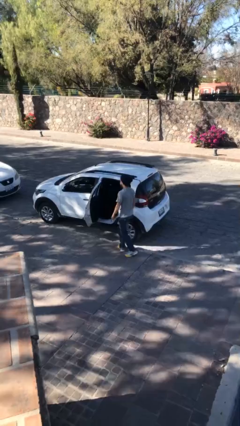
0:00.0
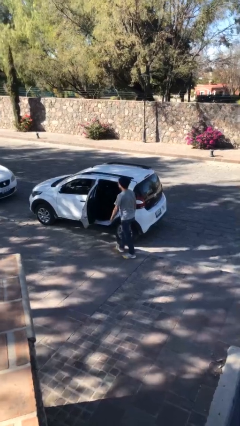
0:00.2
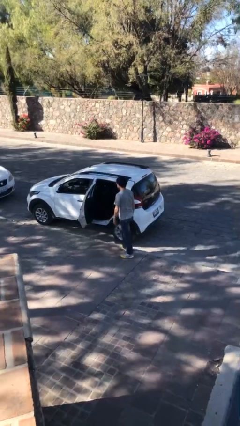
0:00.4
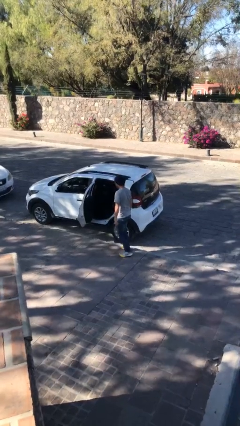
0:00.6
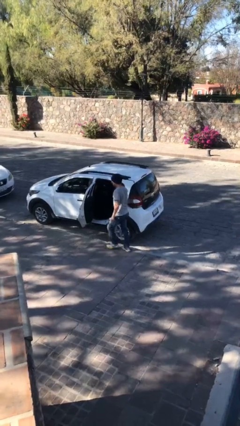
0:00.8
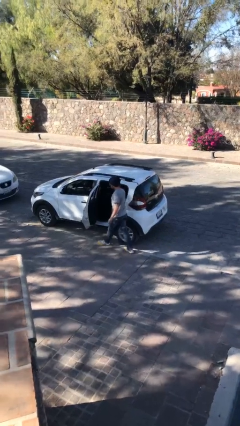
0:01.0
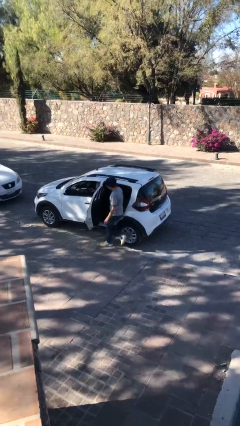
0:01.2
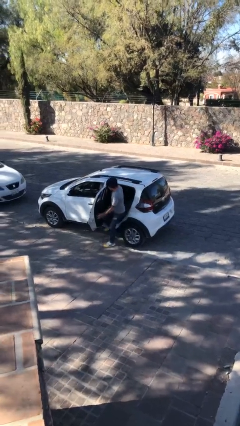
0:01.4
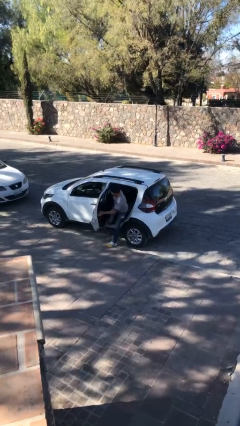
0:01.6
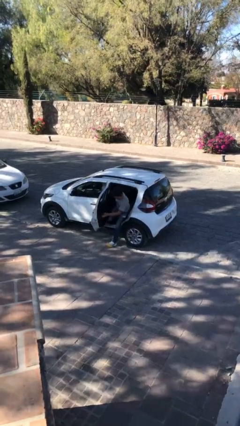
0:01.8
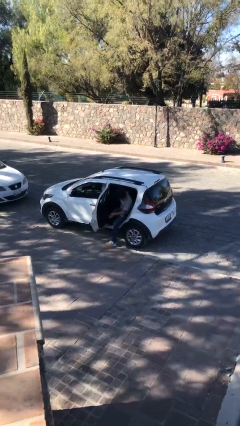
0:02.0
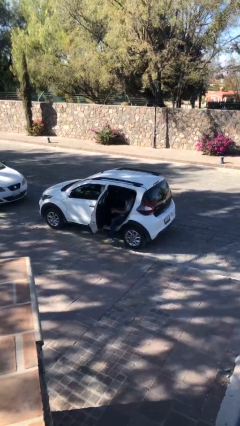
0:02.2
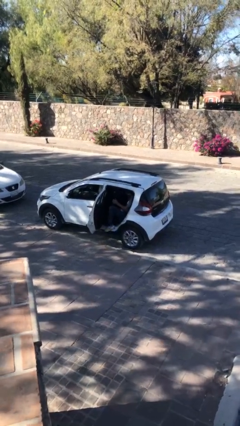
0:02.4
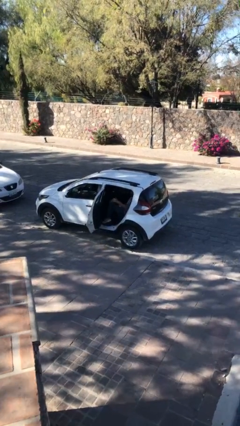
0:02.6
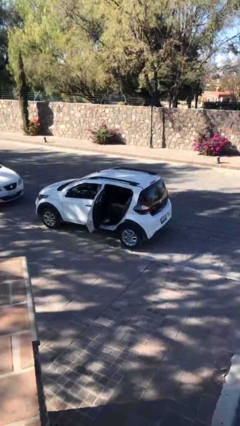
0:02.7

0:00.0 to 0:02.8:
person enters car

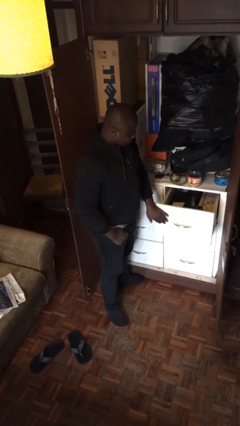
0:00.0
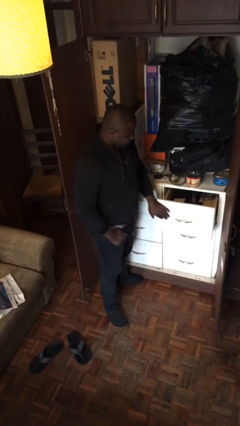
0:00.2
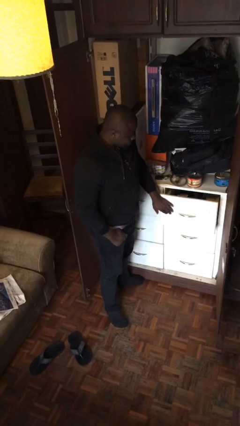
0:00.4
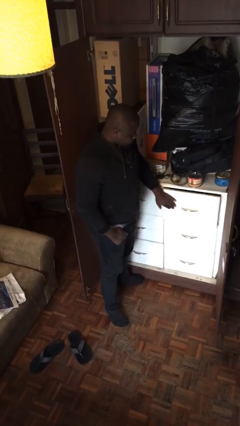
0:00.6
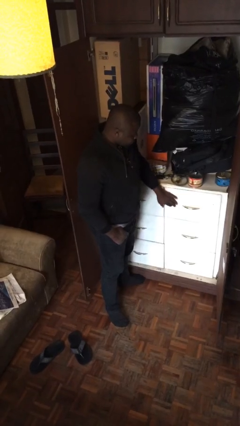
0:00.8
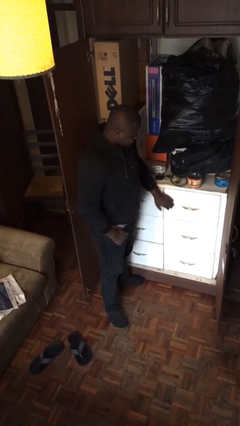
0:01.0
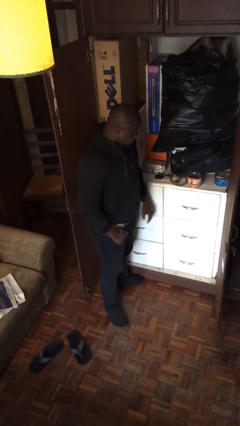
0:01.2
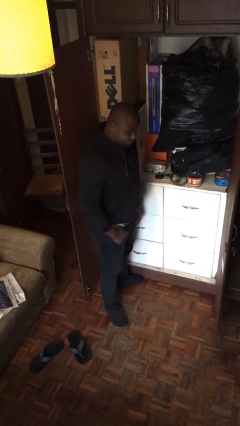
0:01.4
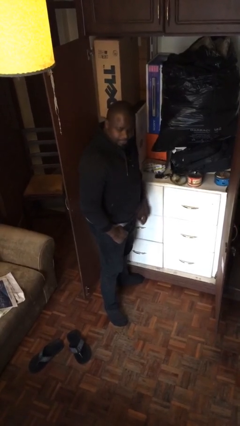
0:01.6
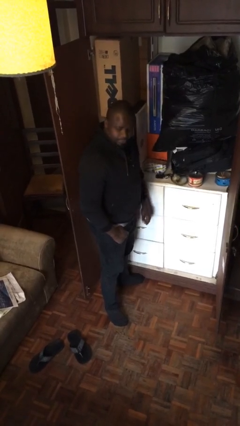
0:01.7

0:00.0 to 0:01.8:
person closes dresser drawer

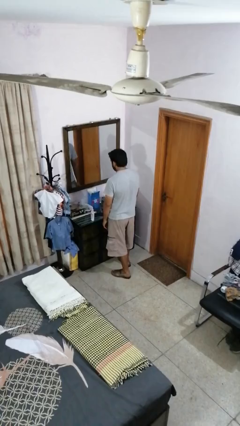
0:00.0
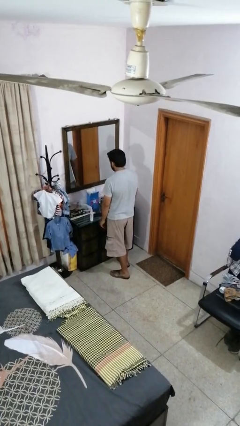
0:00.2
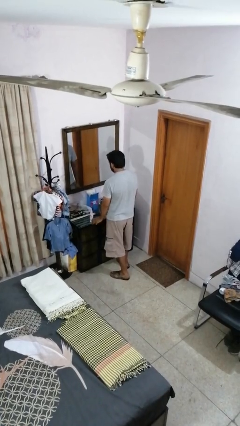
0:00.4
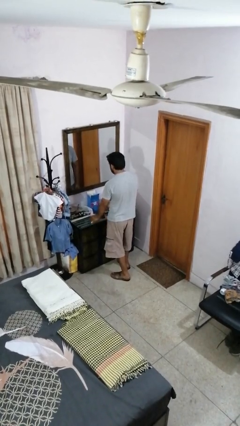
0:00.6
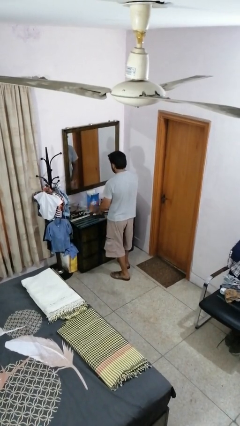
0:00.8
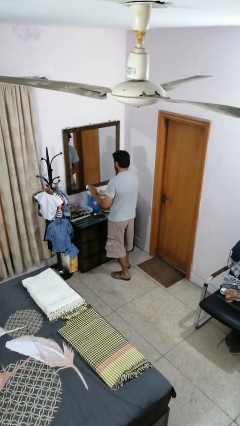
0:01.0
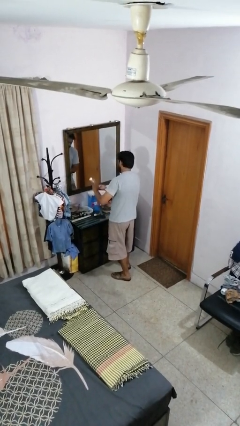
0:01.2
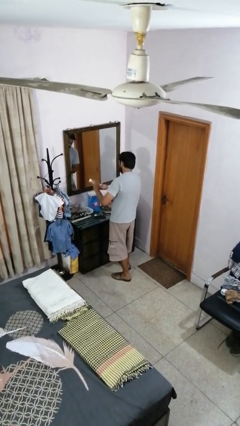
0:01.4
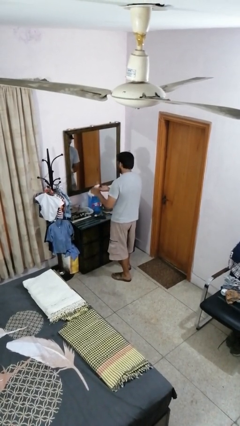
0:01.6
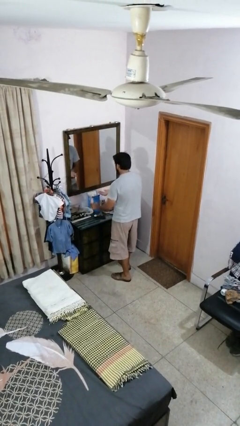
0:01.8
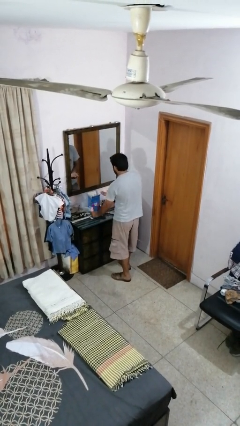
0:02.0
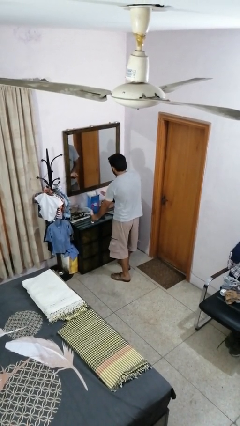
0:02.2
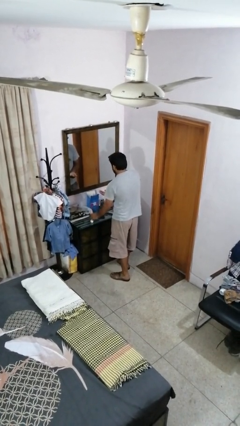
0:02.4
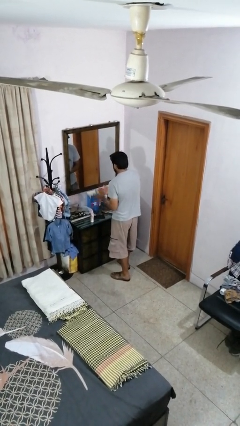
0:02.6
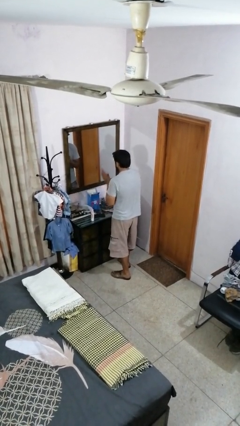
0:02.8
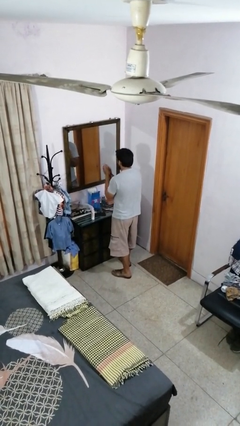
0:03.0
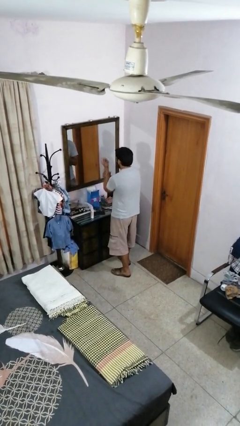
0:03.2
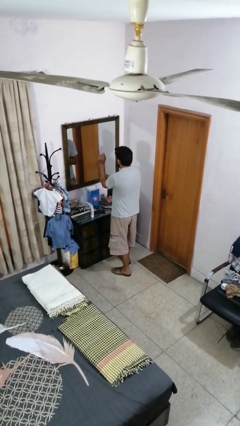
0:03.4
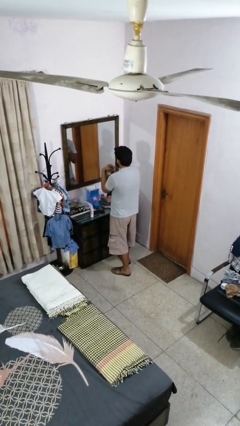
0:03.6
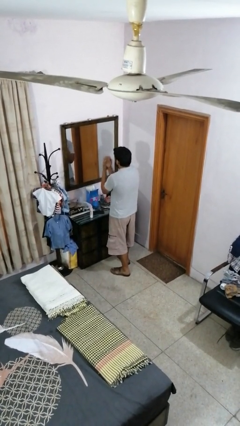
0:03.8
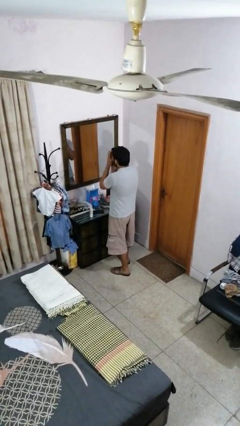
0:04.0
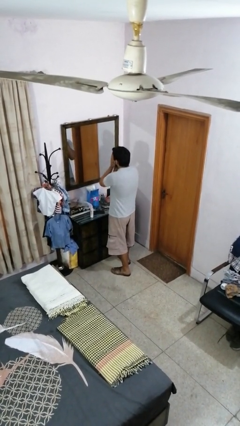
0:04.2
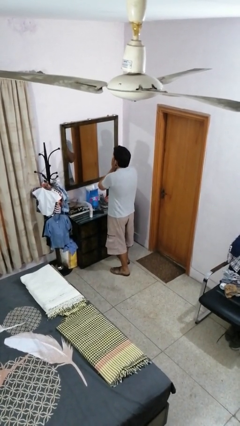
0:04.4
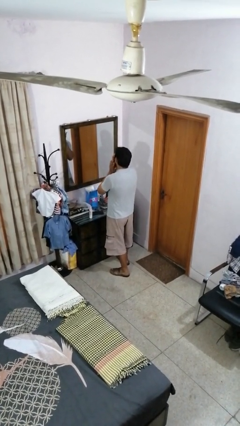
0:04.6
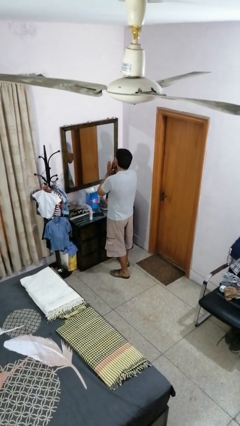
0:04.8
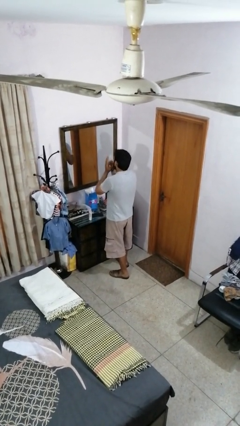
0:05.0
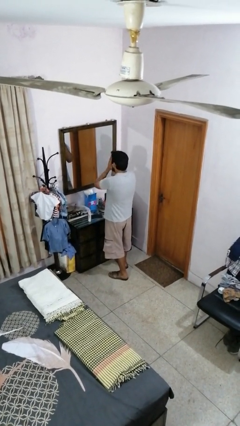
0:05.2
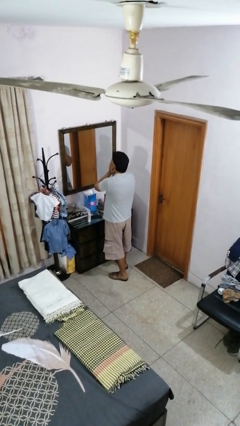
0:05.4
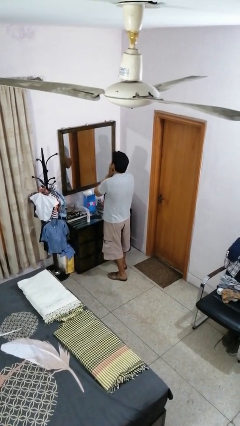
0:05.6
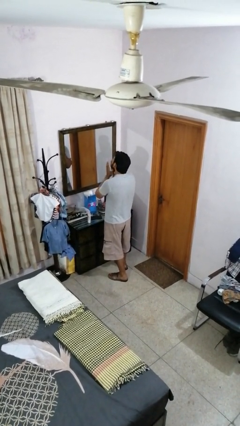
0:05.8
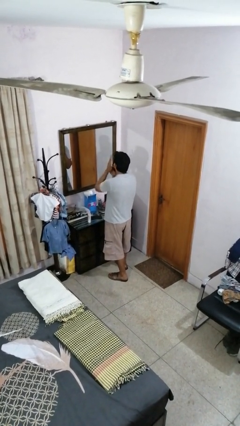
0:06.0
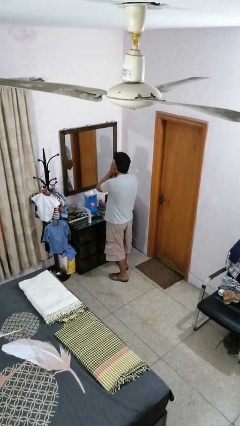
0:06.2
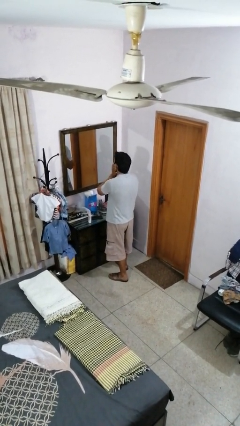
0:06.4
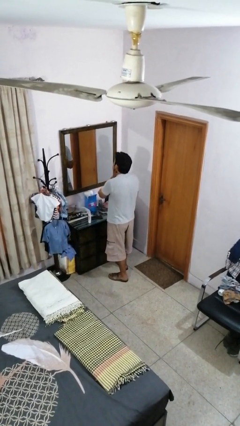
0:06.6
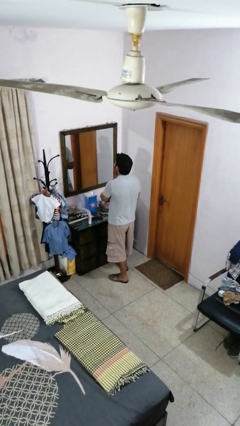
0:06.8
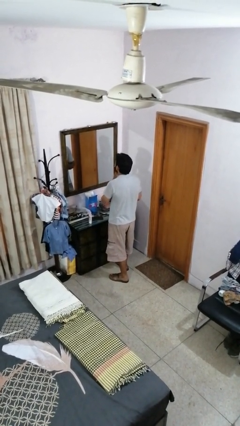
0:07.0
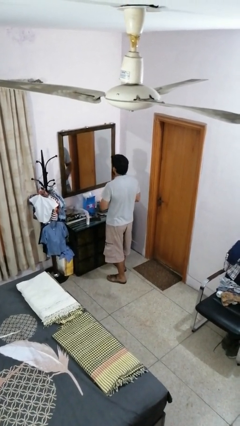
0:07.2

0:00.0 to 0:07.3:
person applies sunscreen

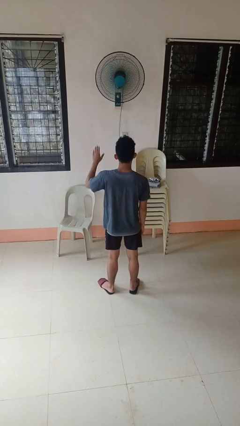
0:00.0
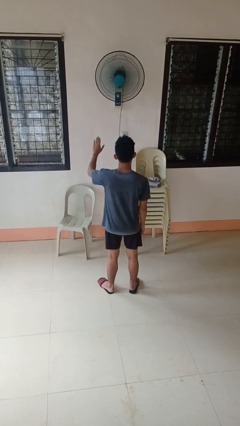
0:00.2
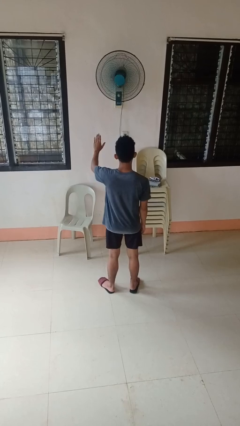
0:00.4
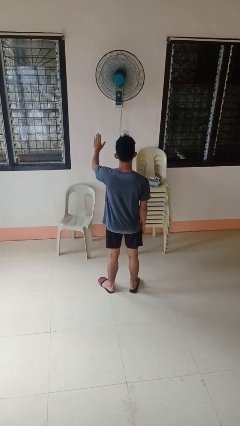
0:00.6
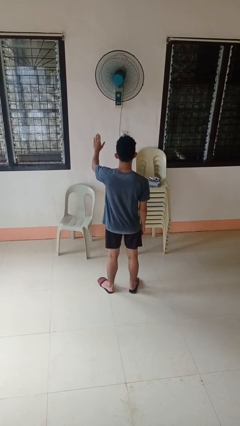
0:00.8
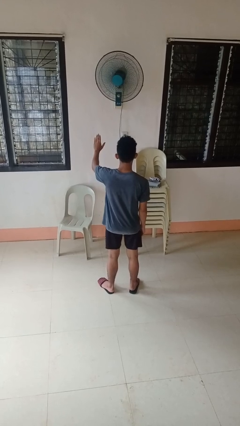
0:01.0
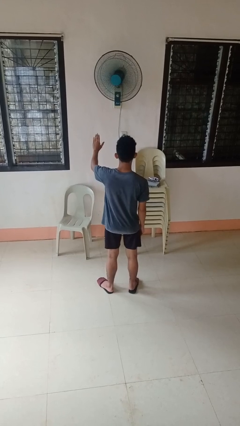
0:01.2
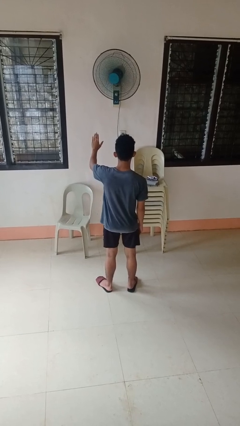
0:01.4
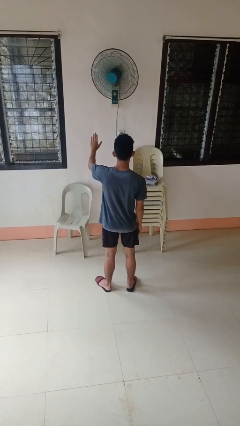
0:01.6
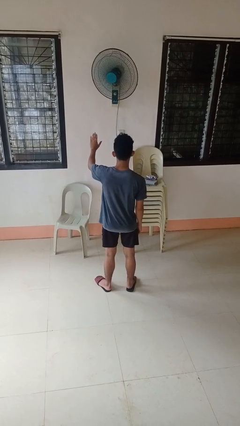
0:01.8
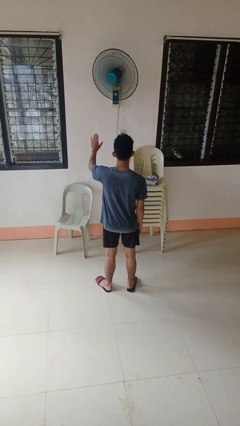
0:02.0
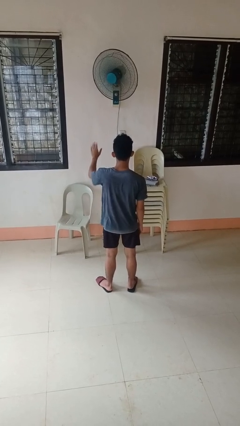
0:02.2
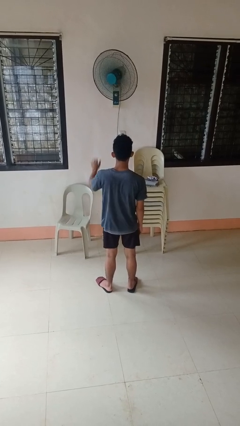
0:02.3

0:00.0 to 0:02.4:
person gestures stop

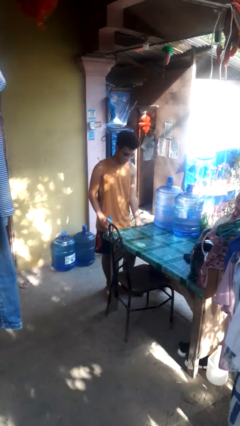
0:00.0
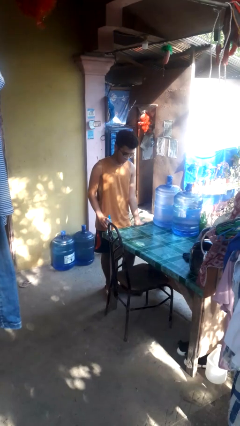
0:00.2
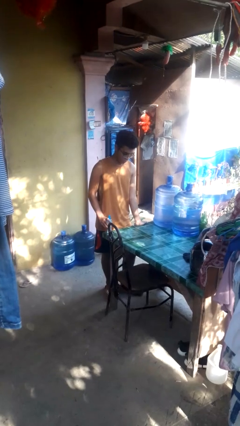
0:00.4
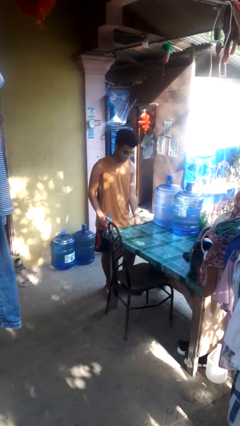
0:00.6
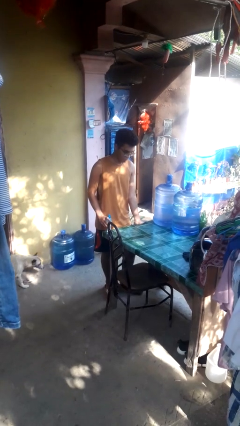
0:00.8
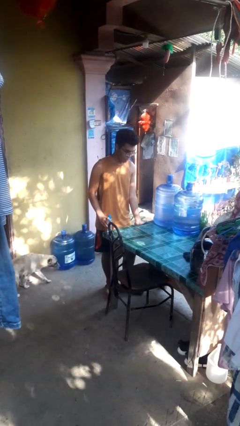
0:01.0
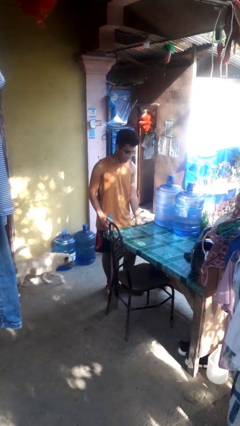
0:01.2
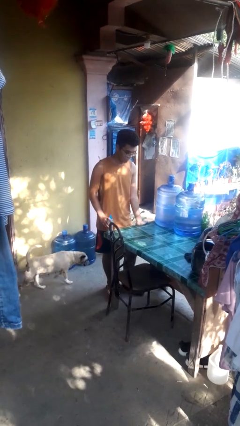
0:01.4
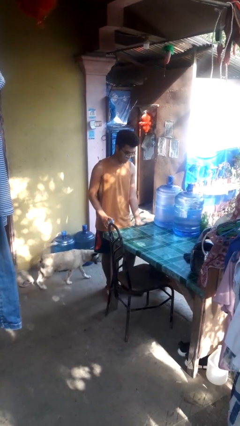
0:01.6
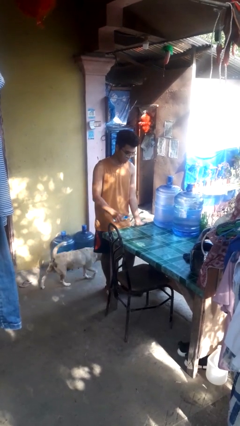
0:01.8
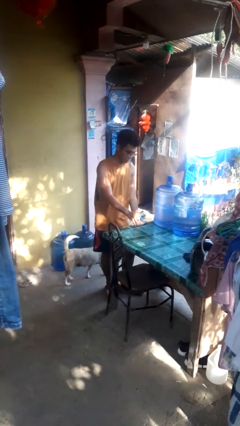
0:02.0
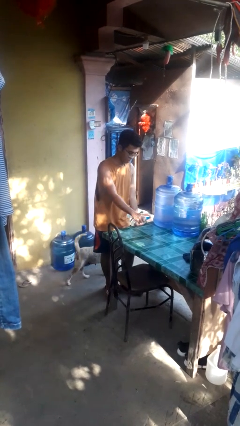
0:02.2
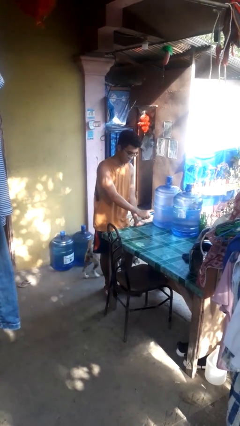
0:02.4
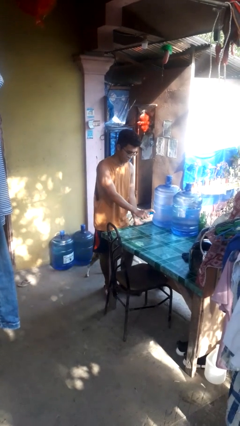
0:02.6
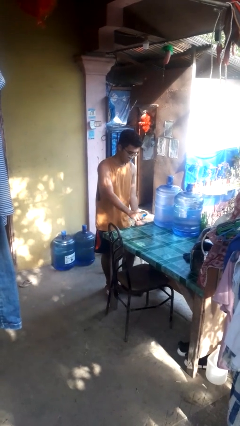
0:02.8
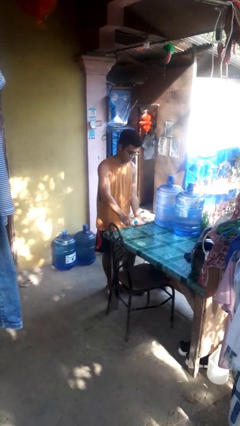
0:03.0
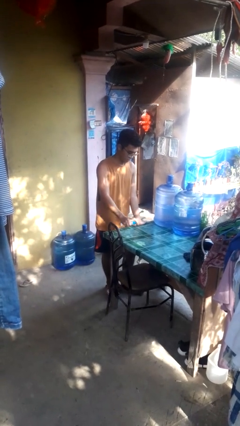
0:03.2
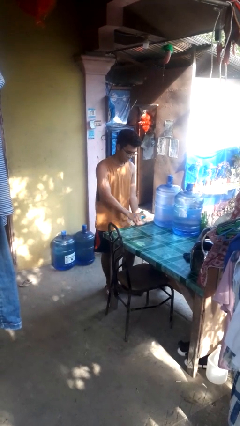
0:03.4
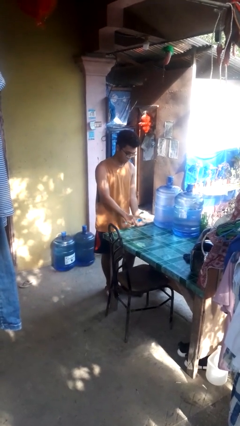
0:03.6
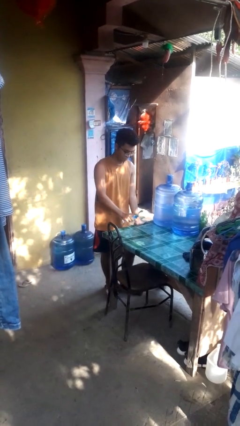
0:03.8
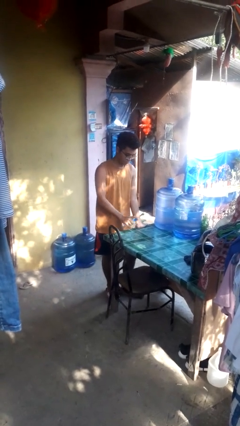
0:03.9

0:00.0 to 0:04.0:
person sprays from bottle
